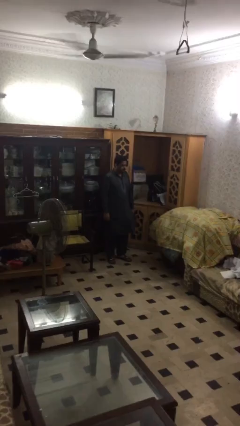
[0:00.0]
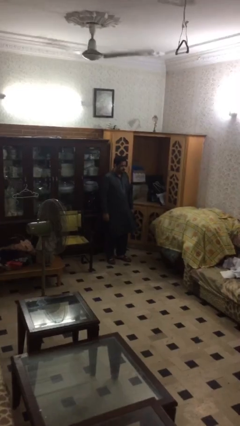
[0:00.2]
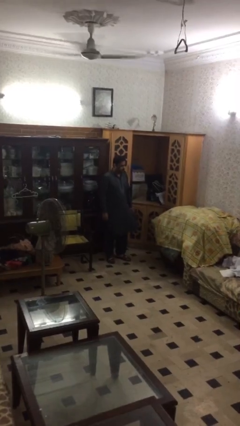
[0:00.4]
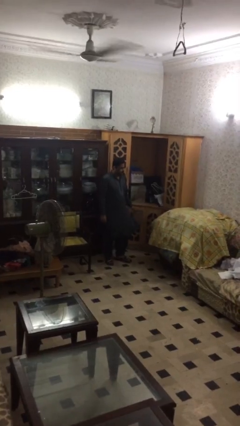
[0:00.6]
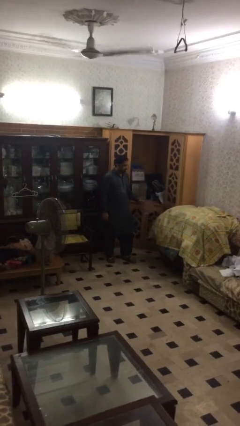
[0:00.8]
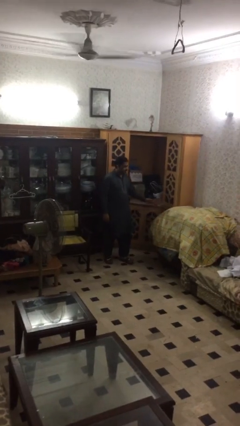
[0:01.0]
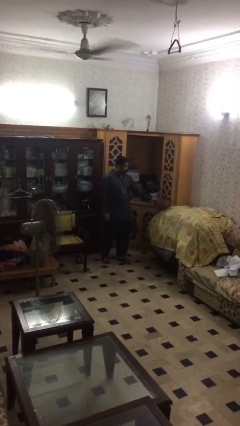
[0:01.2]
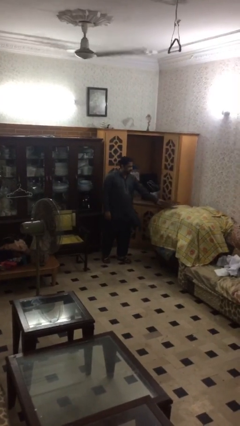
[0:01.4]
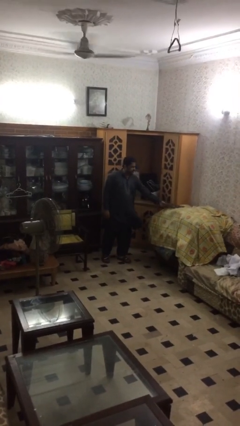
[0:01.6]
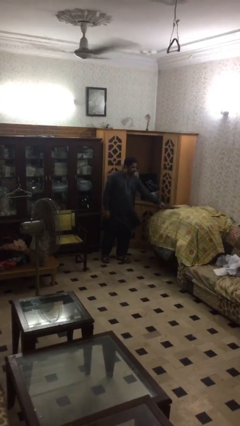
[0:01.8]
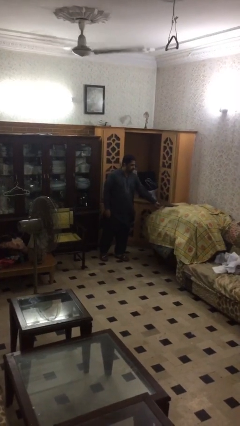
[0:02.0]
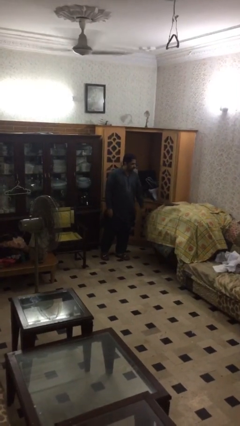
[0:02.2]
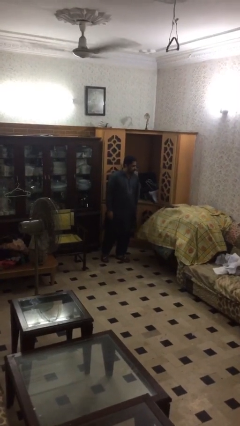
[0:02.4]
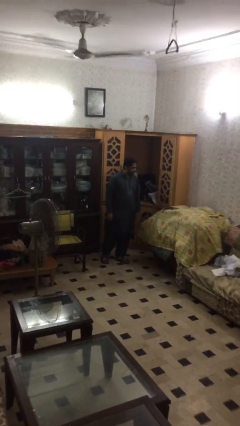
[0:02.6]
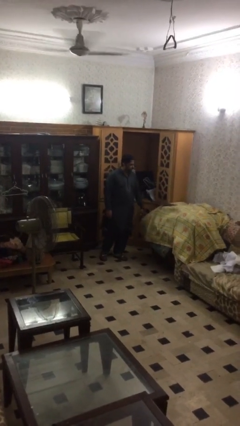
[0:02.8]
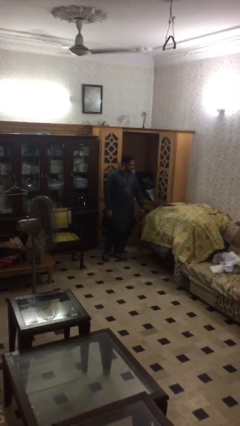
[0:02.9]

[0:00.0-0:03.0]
person puts down object on table

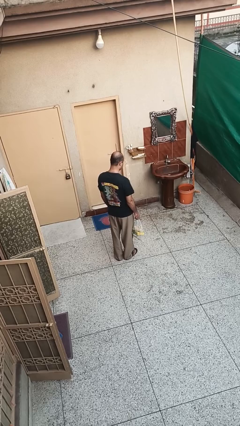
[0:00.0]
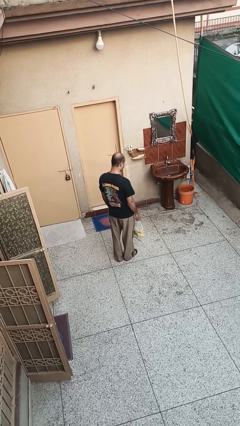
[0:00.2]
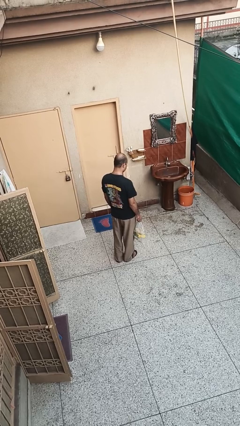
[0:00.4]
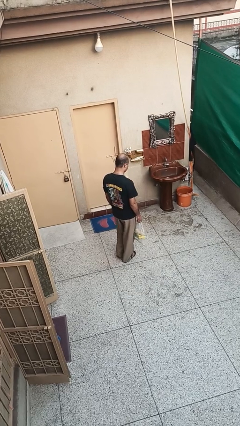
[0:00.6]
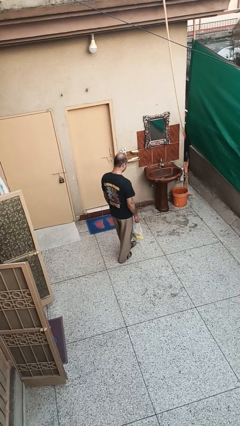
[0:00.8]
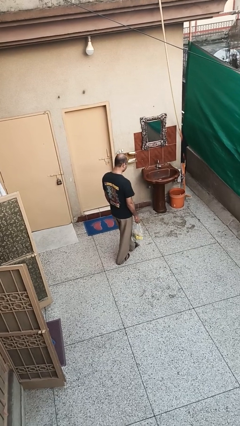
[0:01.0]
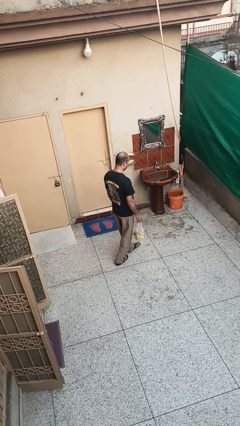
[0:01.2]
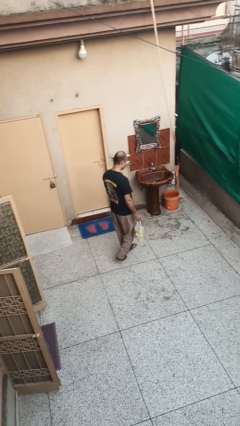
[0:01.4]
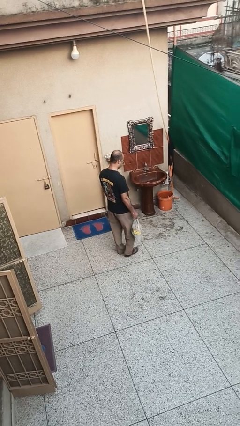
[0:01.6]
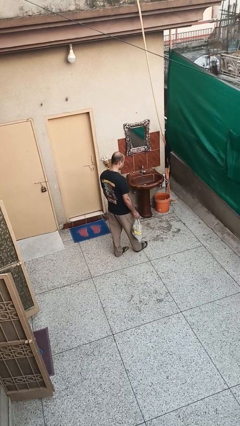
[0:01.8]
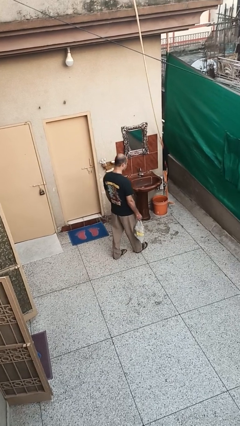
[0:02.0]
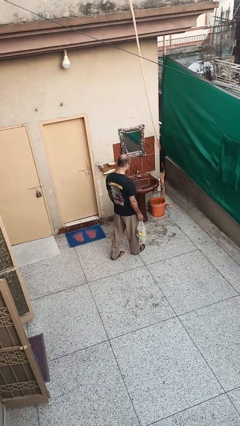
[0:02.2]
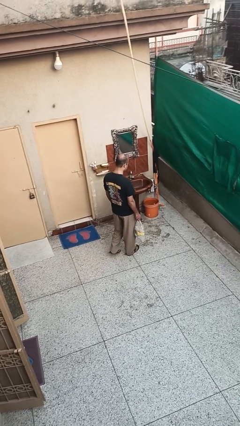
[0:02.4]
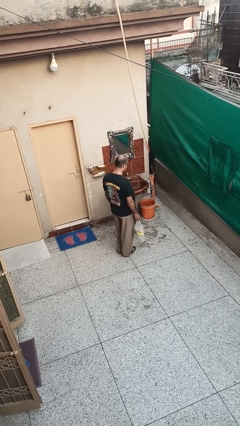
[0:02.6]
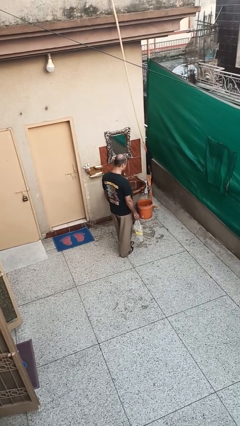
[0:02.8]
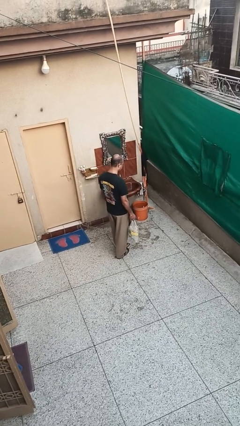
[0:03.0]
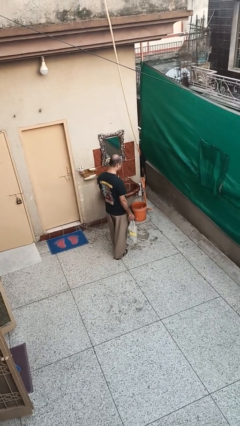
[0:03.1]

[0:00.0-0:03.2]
person carries groceries

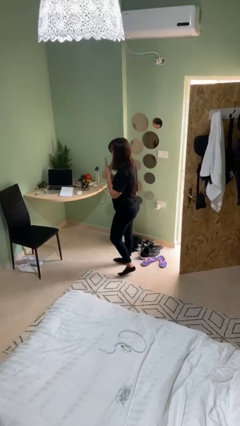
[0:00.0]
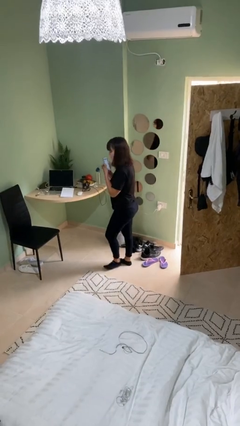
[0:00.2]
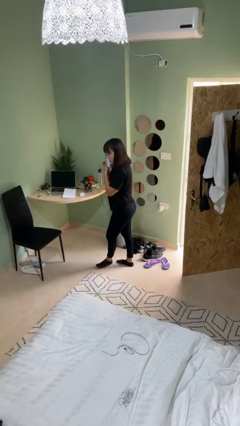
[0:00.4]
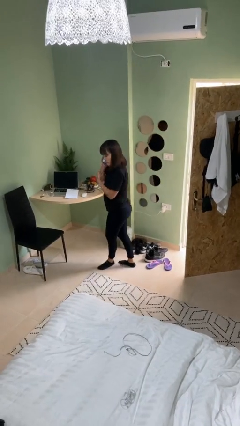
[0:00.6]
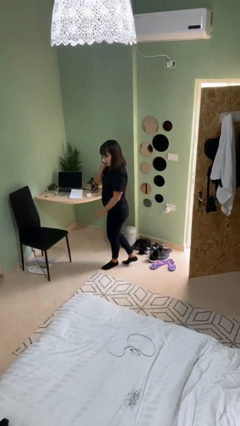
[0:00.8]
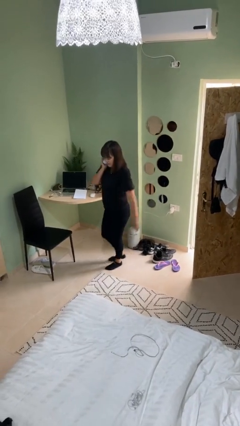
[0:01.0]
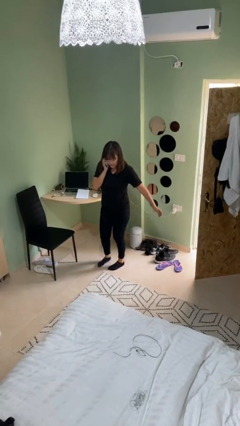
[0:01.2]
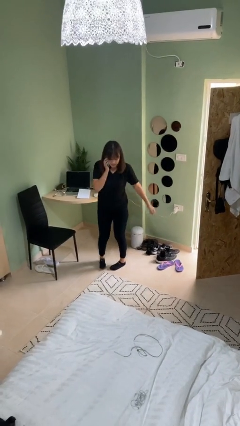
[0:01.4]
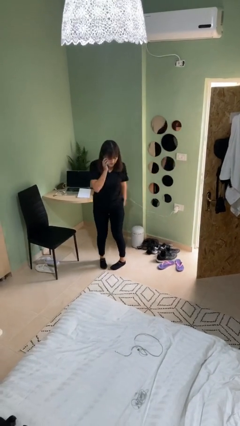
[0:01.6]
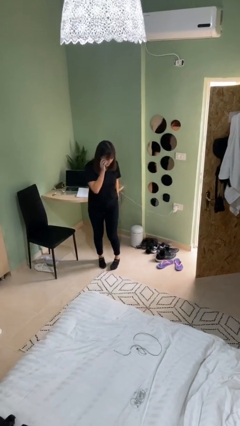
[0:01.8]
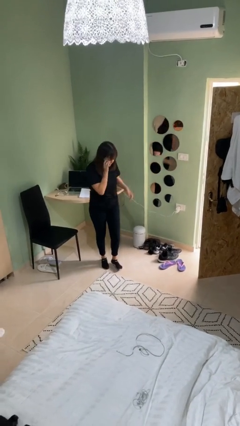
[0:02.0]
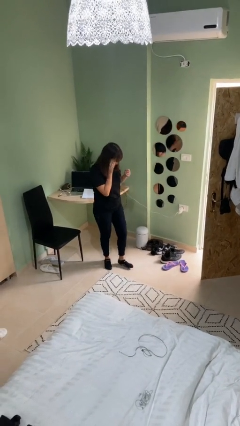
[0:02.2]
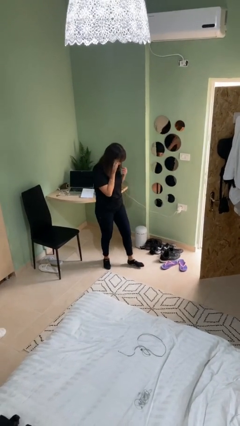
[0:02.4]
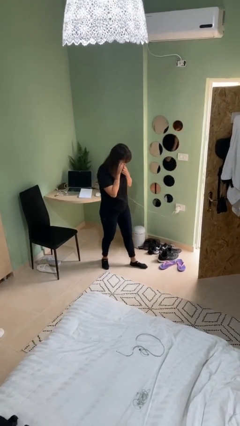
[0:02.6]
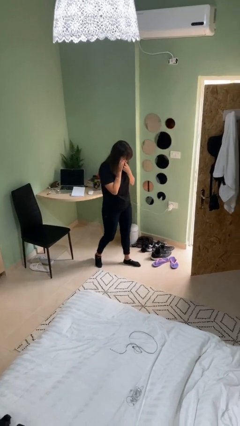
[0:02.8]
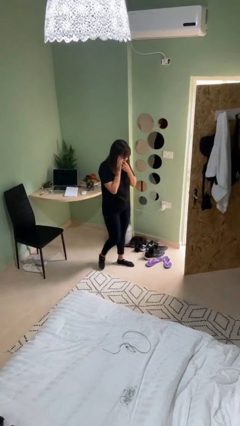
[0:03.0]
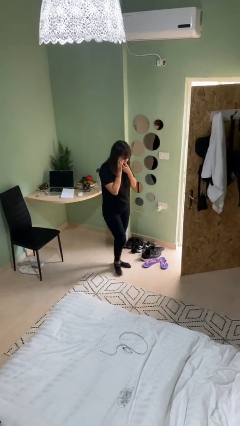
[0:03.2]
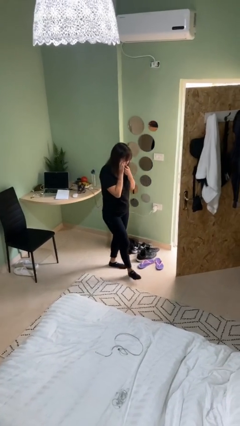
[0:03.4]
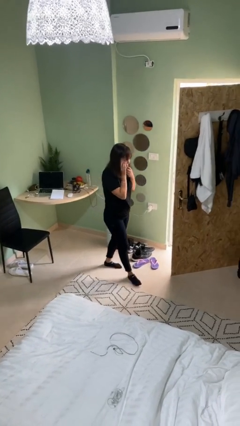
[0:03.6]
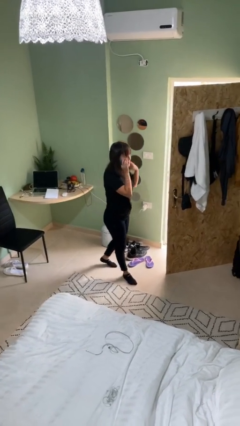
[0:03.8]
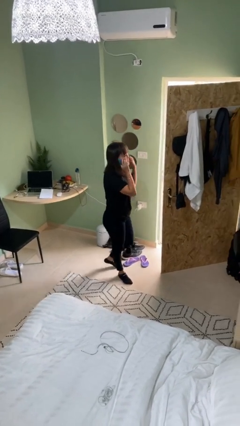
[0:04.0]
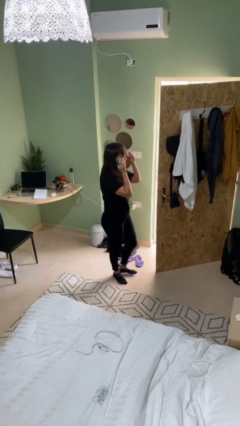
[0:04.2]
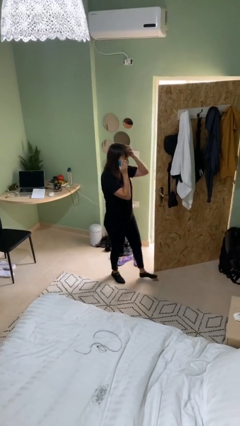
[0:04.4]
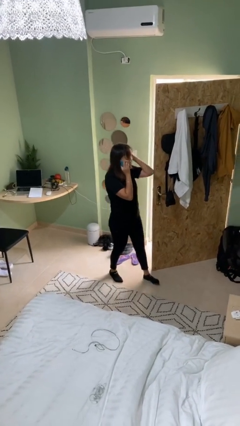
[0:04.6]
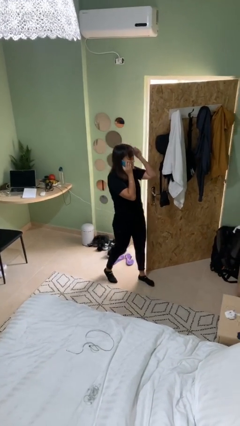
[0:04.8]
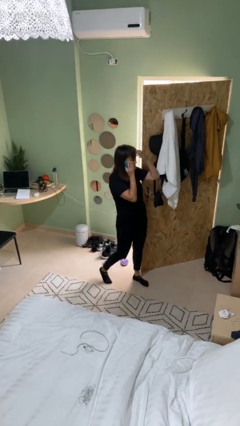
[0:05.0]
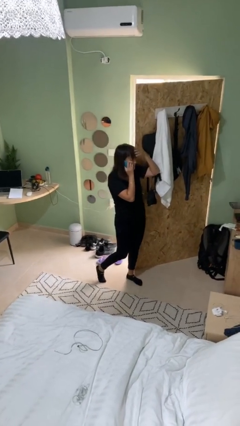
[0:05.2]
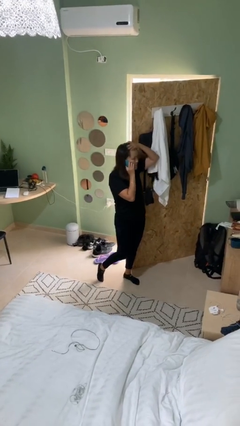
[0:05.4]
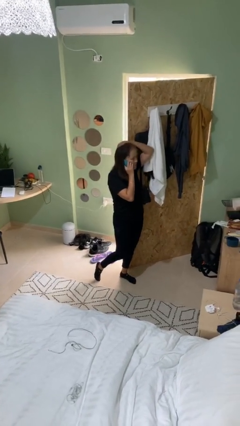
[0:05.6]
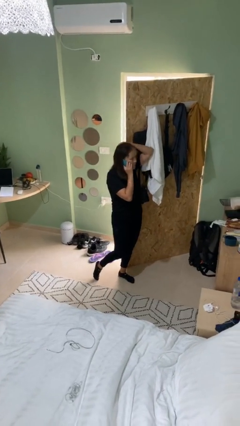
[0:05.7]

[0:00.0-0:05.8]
person talks on phone

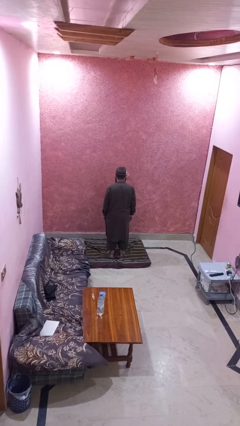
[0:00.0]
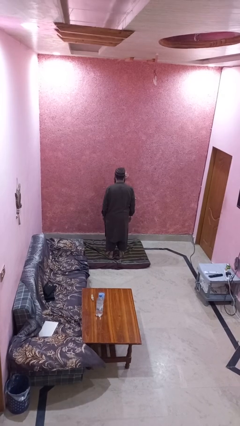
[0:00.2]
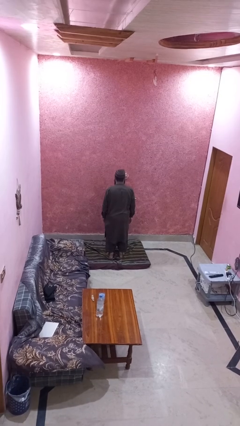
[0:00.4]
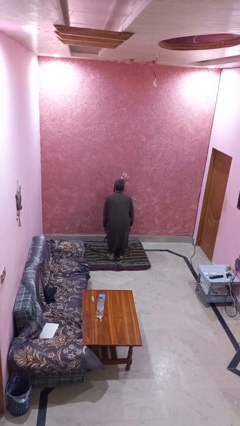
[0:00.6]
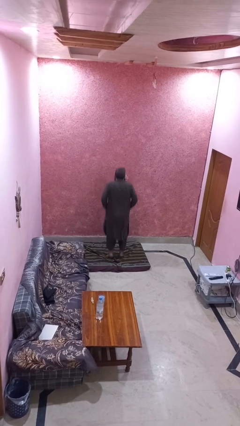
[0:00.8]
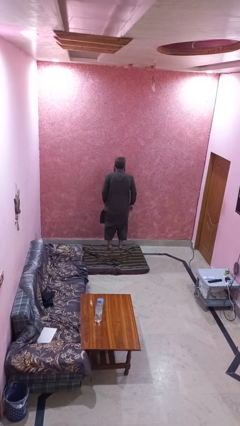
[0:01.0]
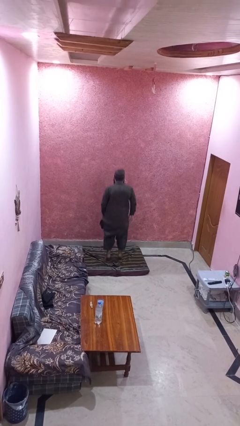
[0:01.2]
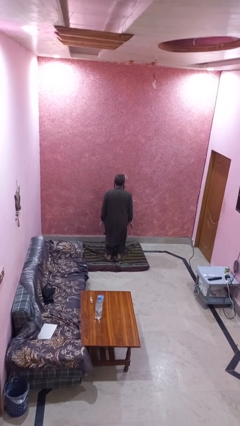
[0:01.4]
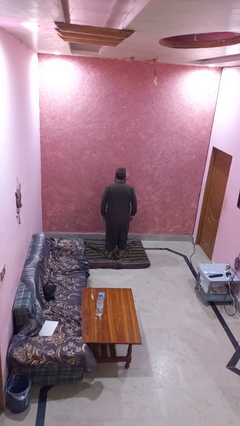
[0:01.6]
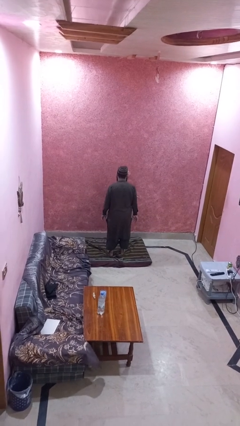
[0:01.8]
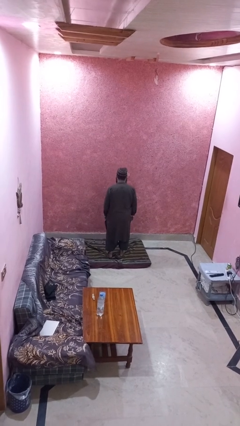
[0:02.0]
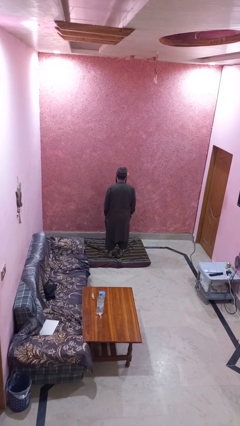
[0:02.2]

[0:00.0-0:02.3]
person jumps

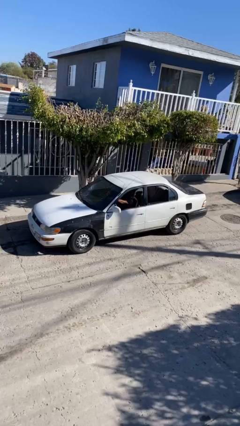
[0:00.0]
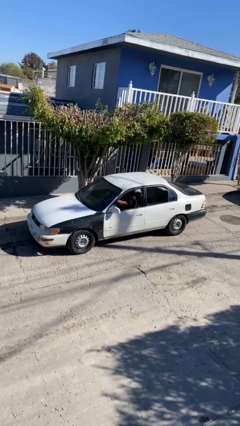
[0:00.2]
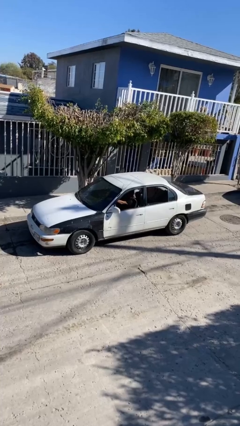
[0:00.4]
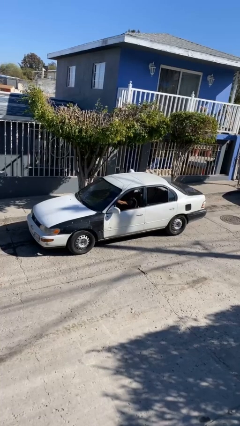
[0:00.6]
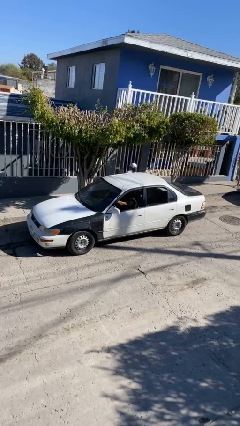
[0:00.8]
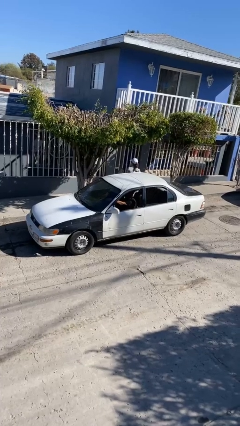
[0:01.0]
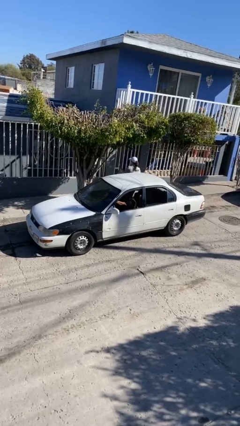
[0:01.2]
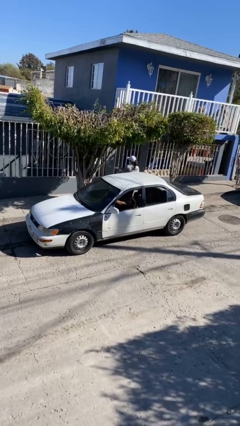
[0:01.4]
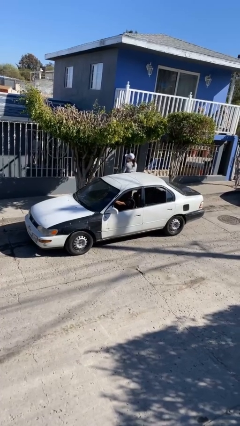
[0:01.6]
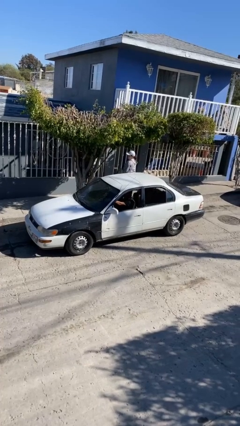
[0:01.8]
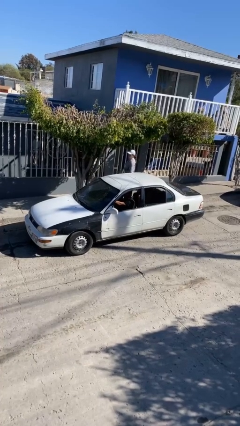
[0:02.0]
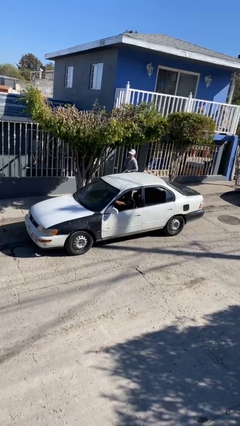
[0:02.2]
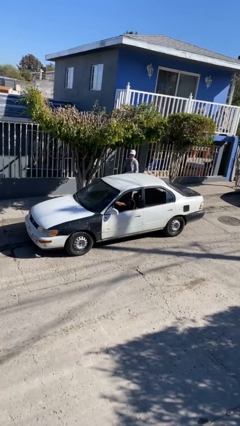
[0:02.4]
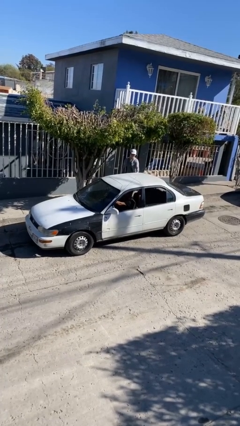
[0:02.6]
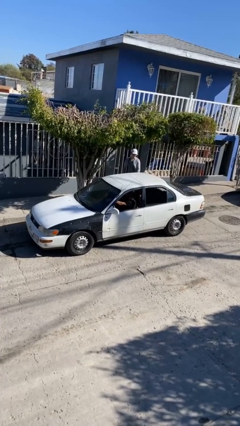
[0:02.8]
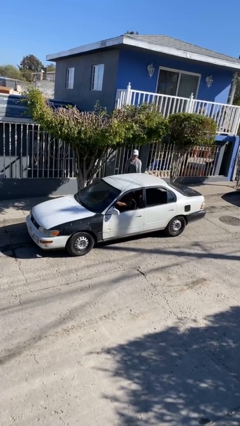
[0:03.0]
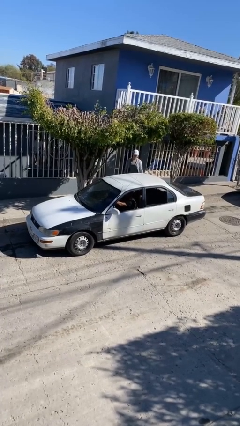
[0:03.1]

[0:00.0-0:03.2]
car drops off person
